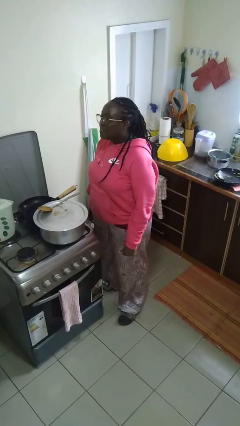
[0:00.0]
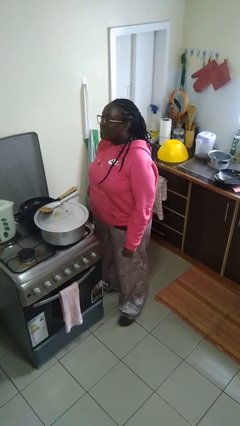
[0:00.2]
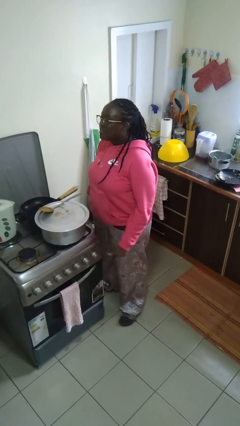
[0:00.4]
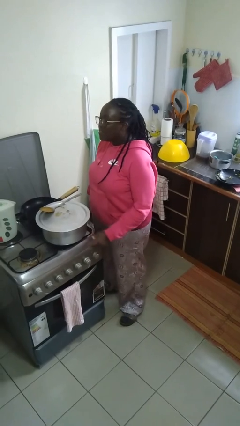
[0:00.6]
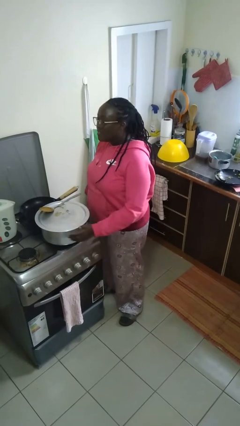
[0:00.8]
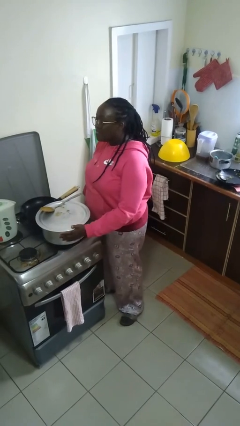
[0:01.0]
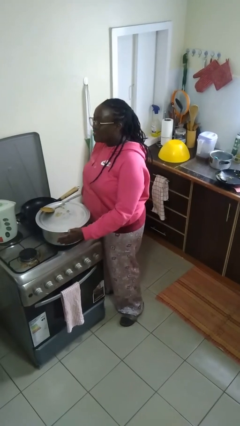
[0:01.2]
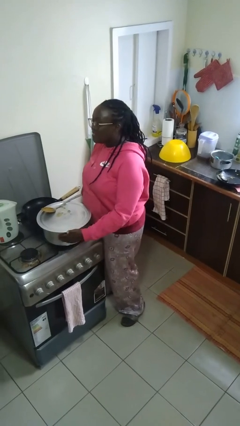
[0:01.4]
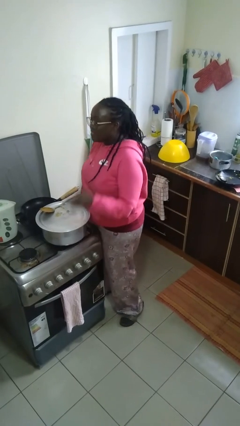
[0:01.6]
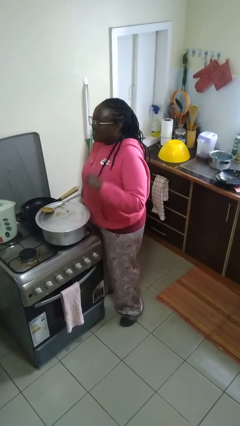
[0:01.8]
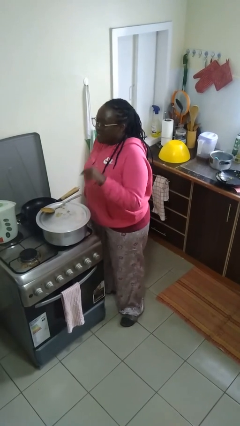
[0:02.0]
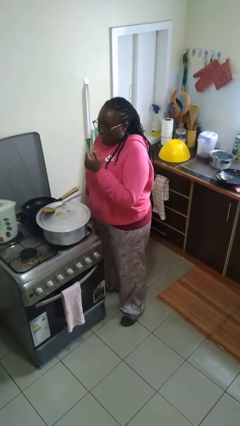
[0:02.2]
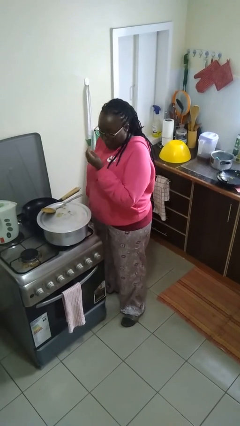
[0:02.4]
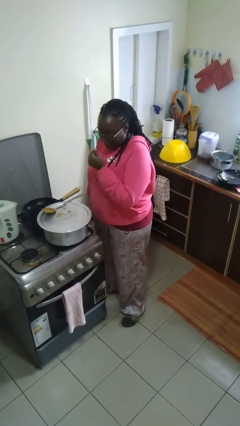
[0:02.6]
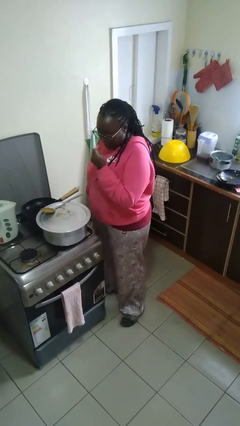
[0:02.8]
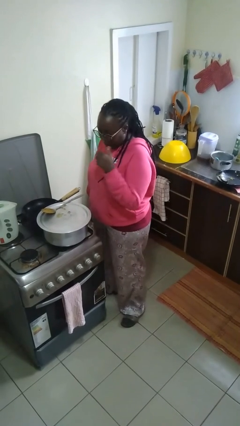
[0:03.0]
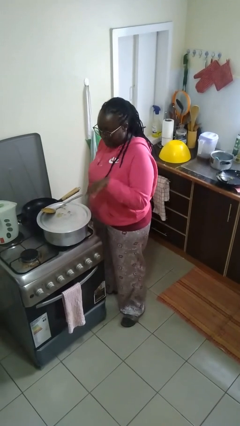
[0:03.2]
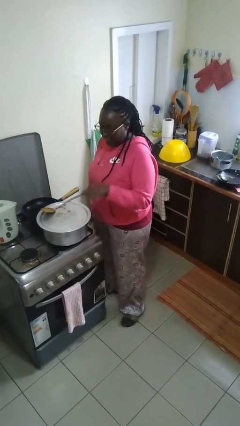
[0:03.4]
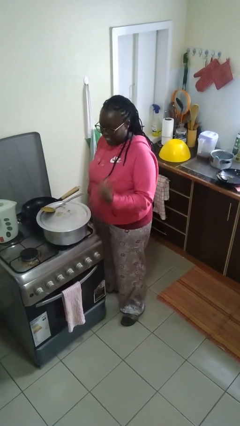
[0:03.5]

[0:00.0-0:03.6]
person burns hand

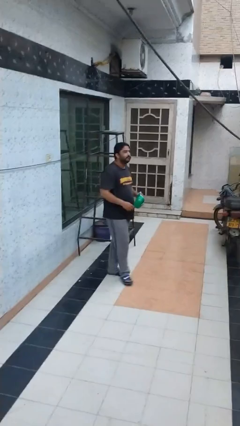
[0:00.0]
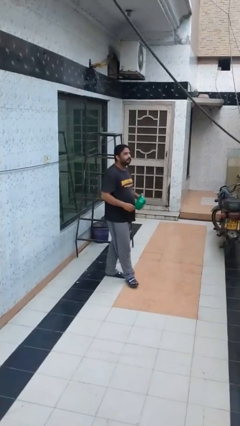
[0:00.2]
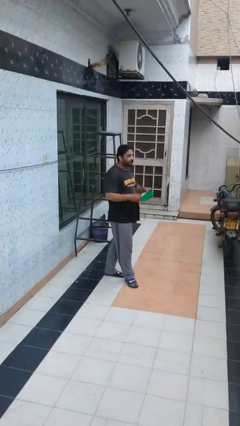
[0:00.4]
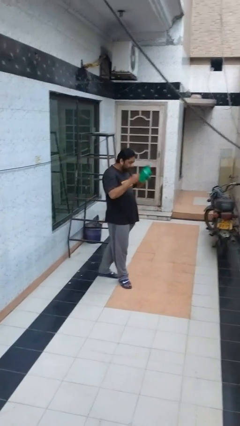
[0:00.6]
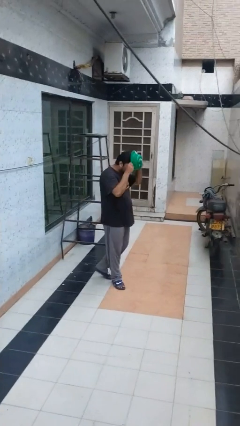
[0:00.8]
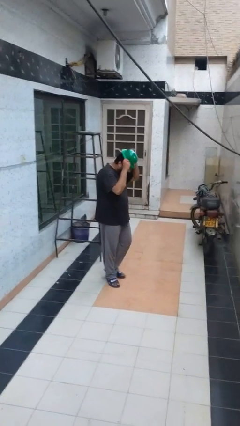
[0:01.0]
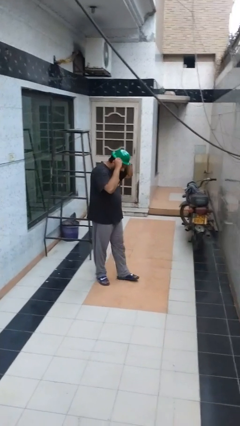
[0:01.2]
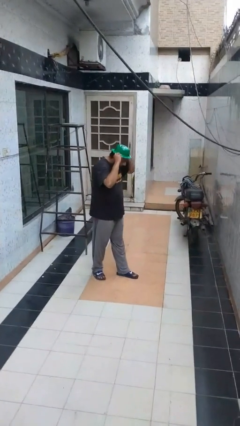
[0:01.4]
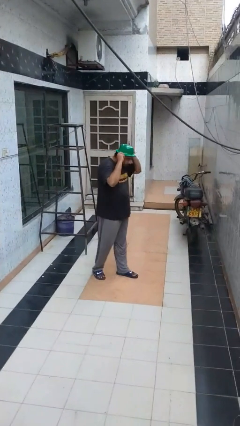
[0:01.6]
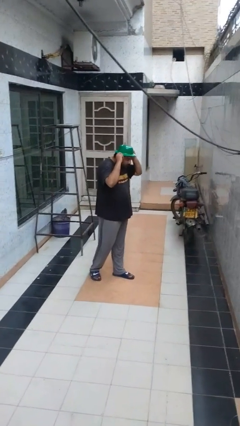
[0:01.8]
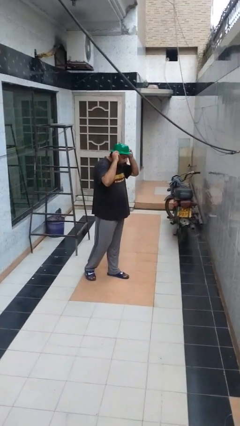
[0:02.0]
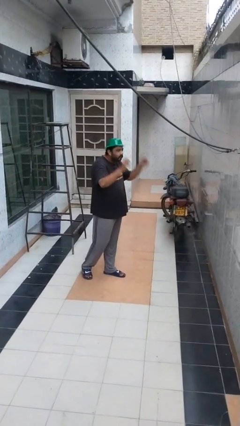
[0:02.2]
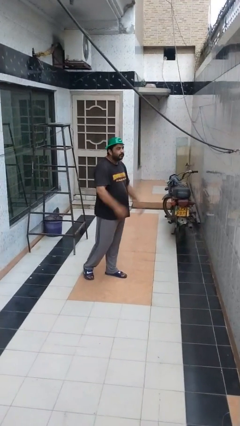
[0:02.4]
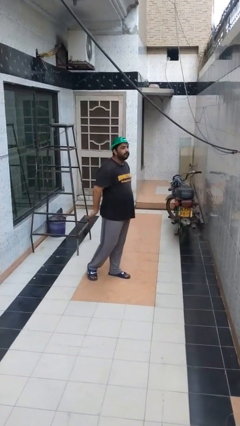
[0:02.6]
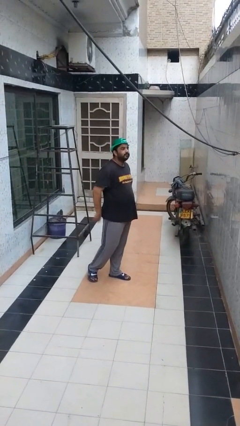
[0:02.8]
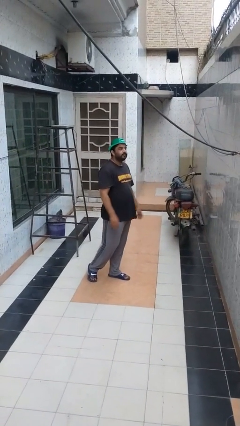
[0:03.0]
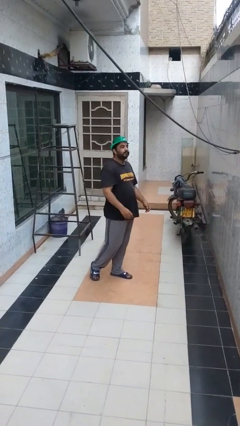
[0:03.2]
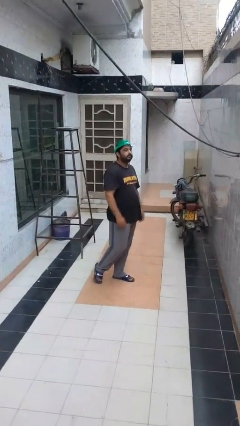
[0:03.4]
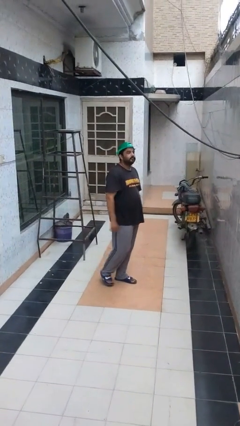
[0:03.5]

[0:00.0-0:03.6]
person puts on hat

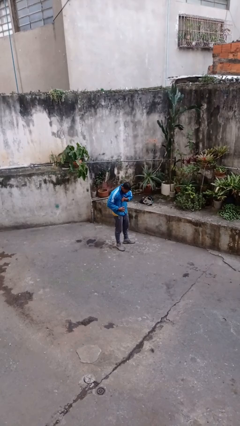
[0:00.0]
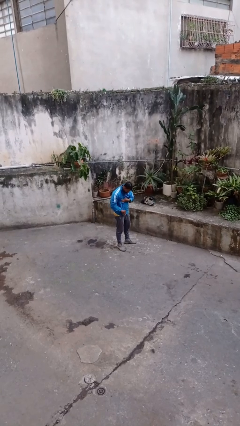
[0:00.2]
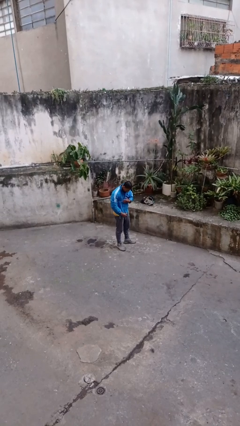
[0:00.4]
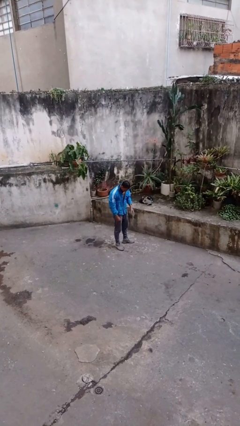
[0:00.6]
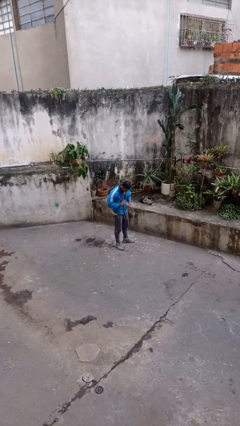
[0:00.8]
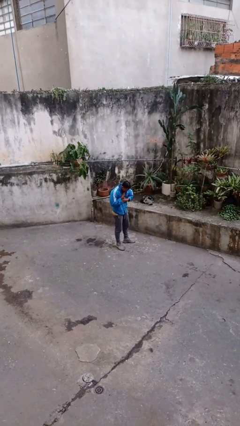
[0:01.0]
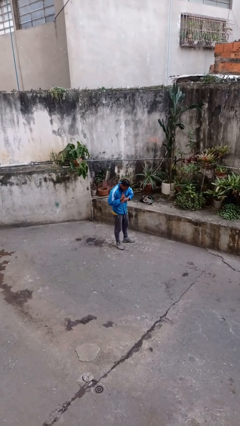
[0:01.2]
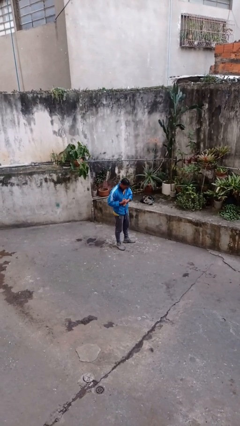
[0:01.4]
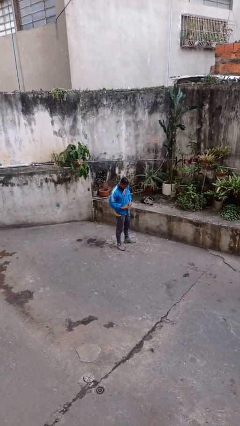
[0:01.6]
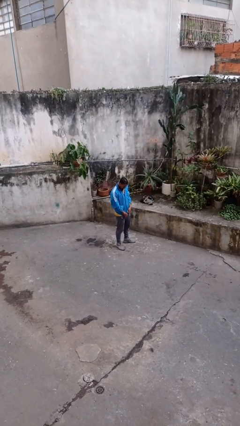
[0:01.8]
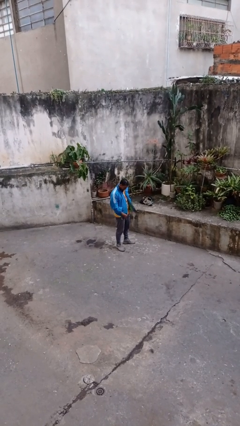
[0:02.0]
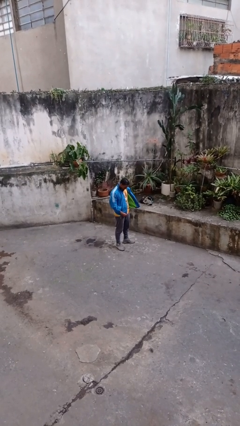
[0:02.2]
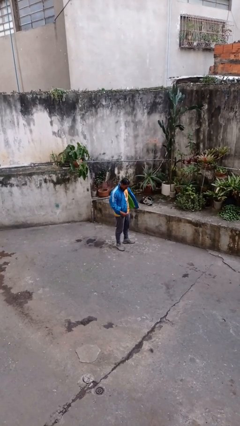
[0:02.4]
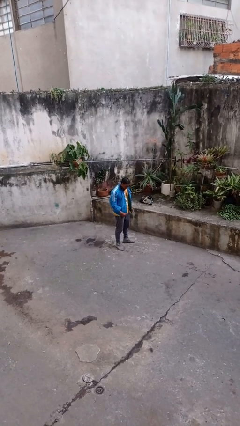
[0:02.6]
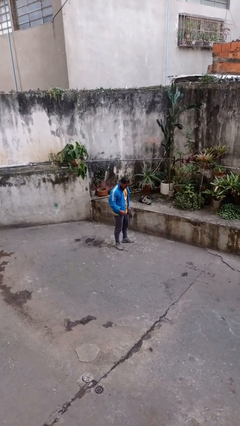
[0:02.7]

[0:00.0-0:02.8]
person unzips jacket

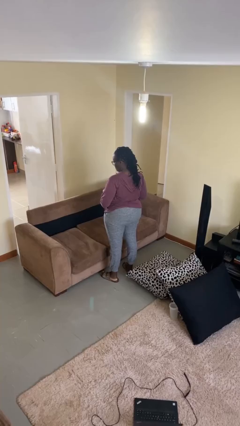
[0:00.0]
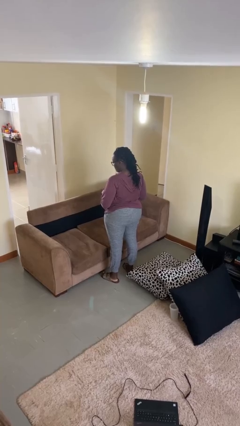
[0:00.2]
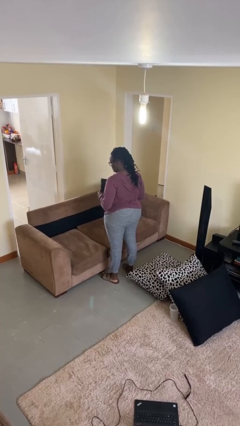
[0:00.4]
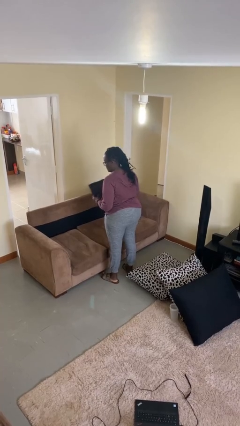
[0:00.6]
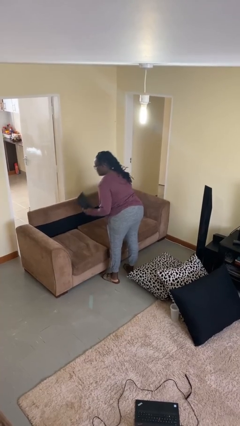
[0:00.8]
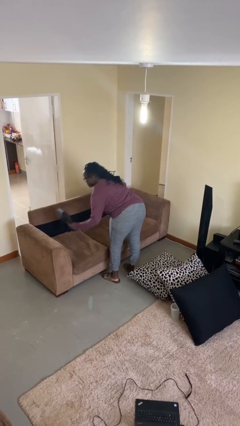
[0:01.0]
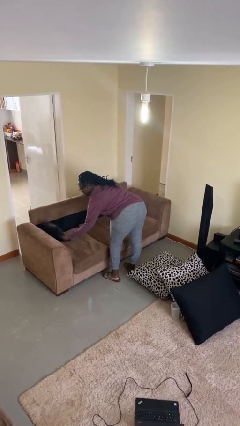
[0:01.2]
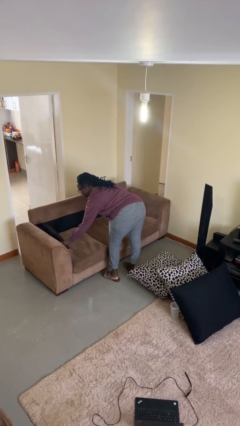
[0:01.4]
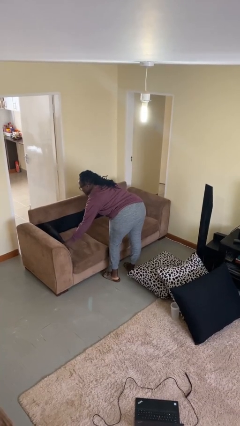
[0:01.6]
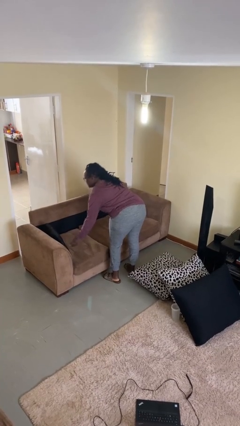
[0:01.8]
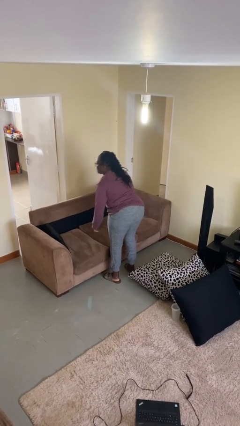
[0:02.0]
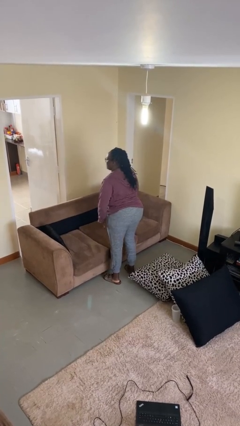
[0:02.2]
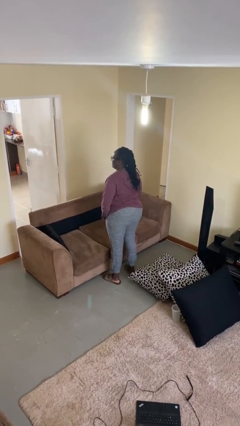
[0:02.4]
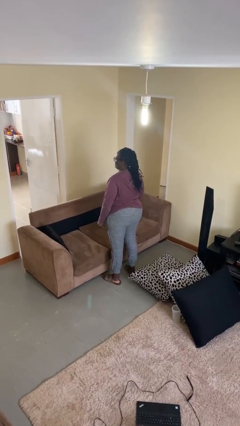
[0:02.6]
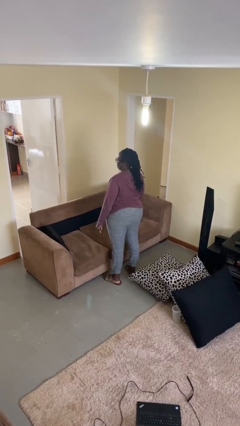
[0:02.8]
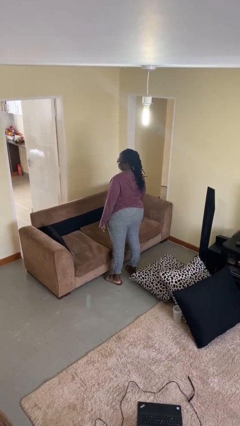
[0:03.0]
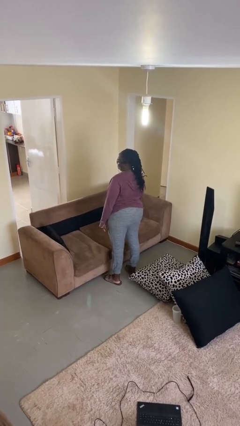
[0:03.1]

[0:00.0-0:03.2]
person puts down object on couch

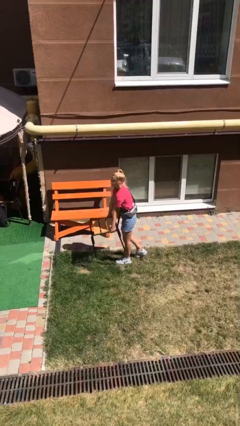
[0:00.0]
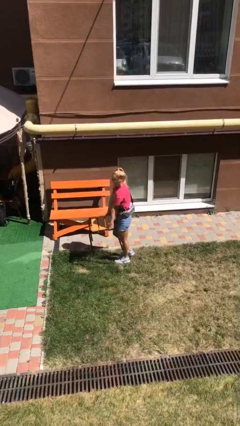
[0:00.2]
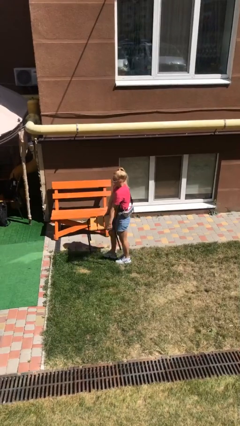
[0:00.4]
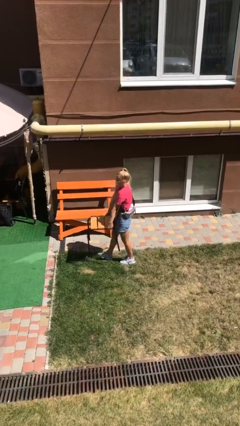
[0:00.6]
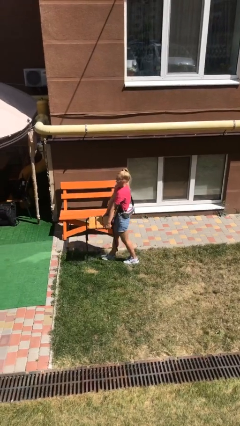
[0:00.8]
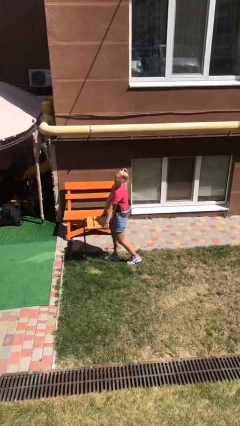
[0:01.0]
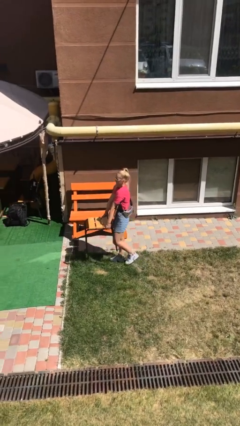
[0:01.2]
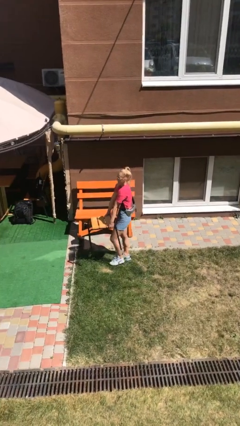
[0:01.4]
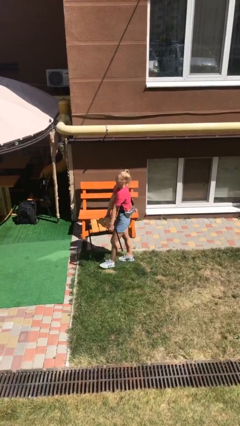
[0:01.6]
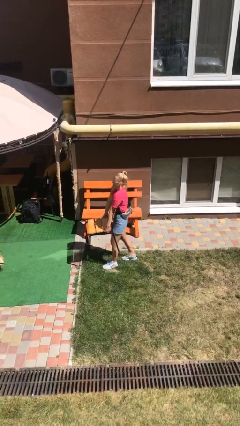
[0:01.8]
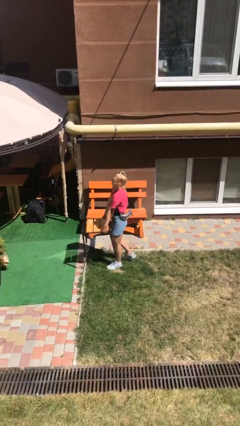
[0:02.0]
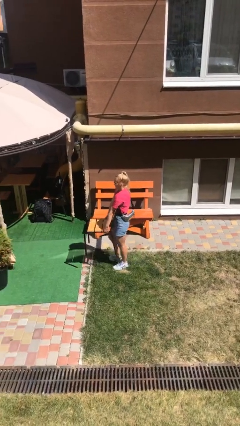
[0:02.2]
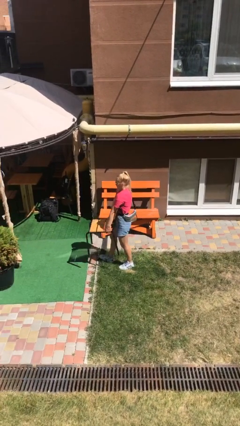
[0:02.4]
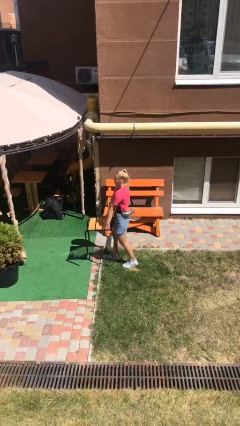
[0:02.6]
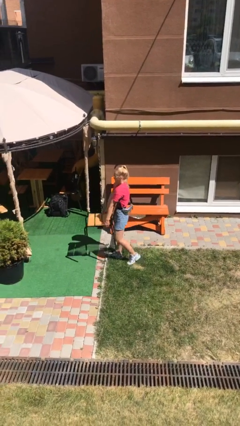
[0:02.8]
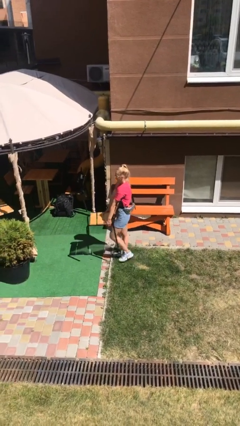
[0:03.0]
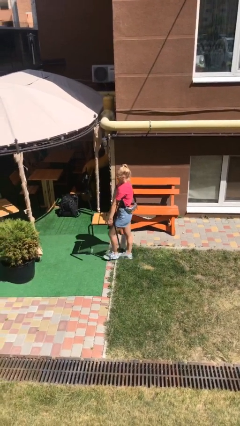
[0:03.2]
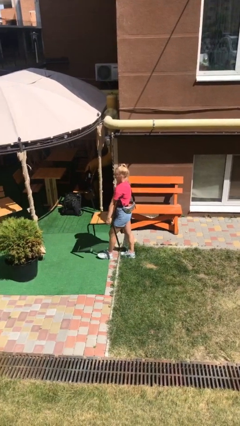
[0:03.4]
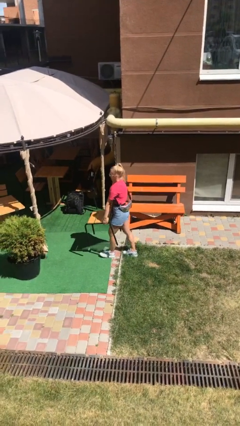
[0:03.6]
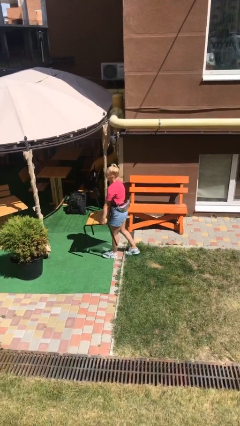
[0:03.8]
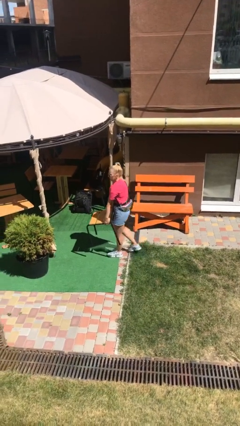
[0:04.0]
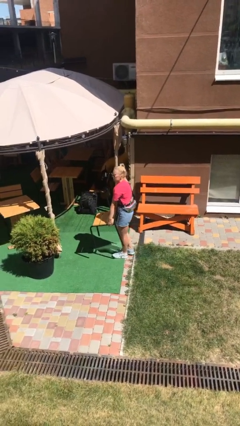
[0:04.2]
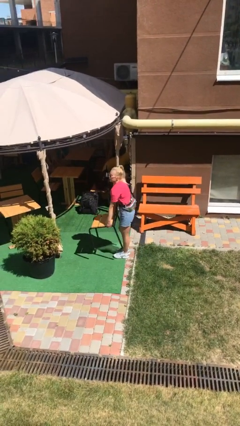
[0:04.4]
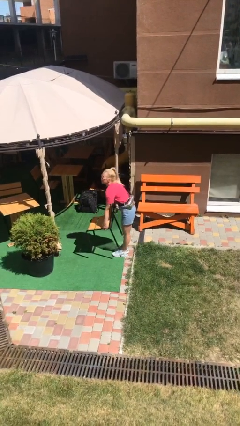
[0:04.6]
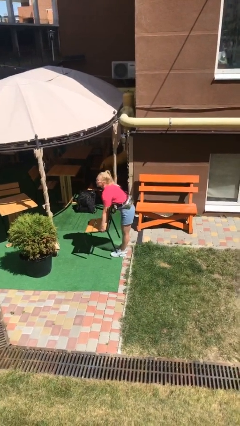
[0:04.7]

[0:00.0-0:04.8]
person carries heavy object
